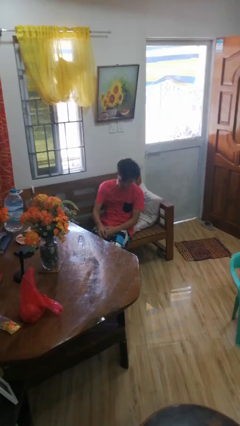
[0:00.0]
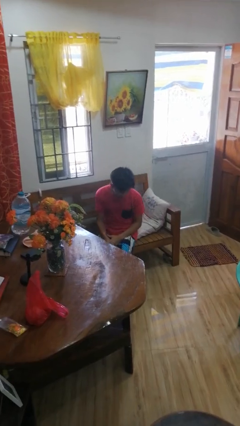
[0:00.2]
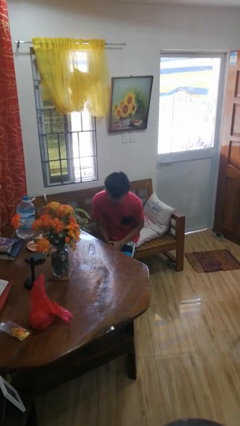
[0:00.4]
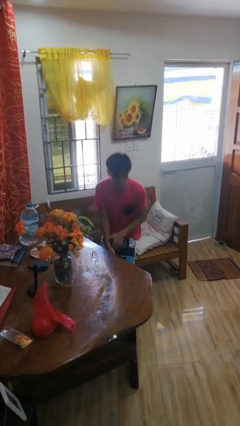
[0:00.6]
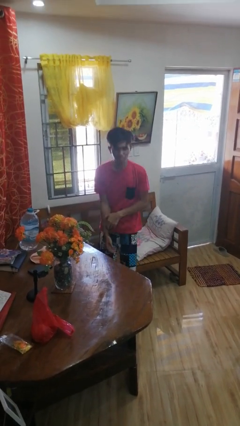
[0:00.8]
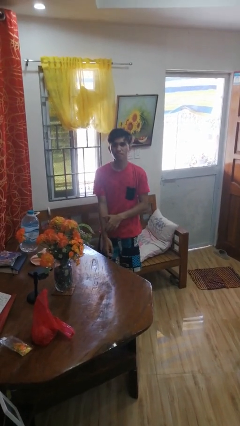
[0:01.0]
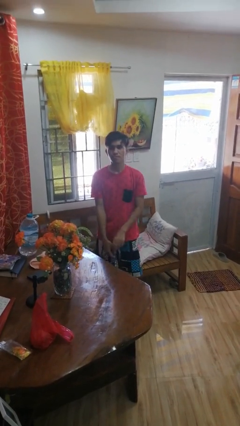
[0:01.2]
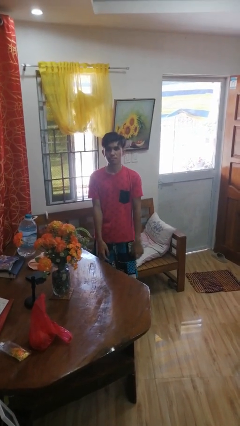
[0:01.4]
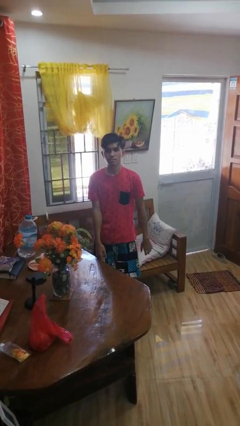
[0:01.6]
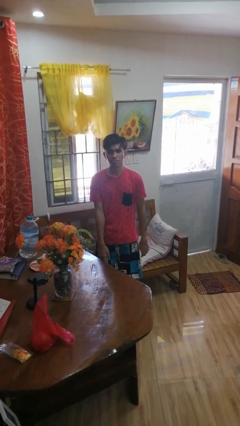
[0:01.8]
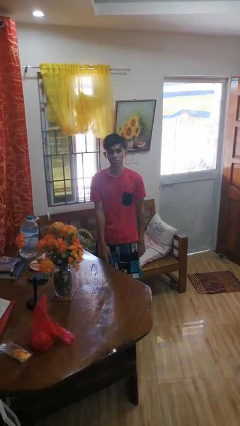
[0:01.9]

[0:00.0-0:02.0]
person stands up

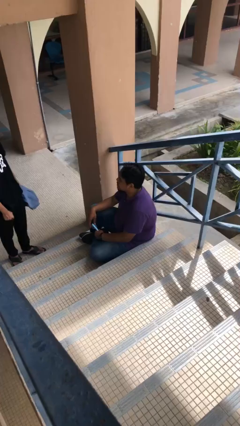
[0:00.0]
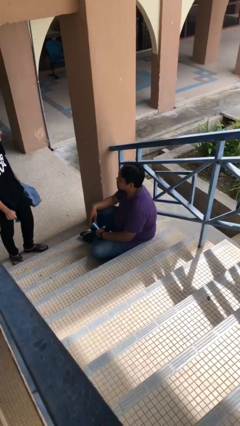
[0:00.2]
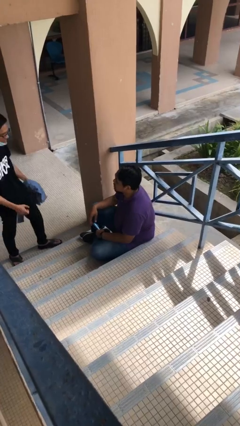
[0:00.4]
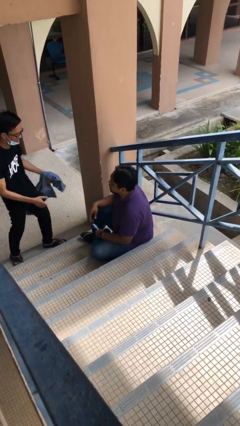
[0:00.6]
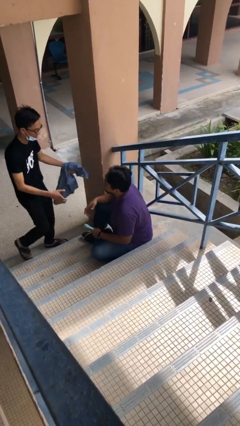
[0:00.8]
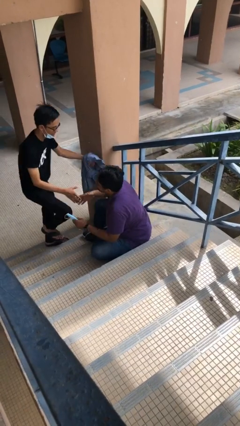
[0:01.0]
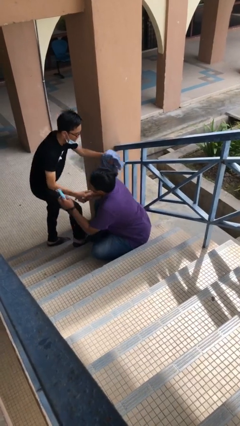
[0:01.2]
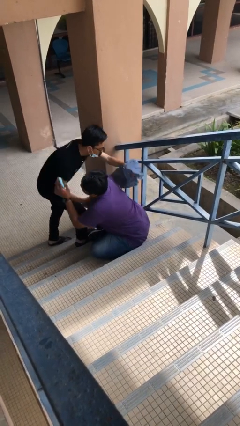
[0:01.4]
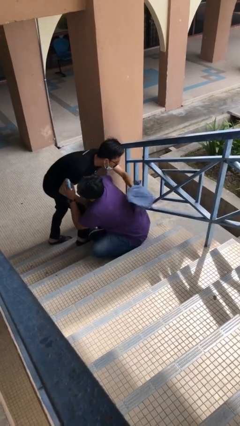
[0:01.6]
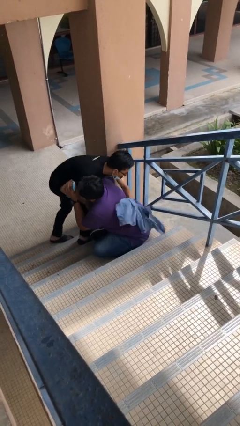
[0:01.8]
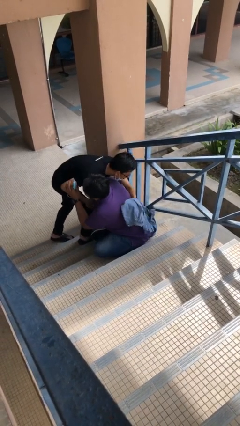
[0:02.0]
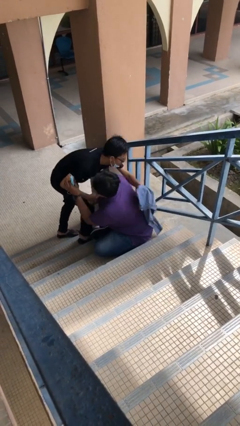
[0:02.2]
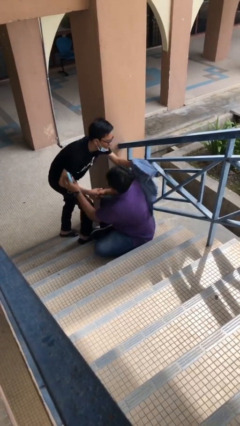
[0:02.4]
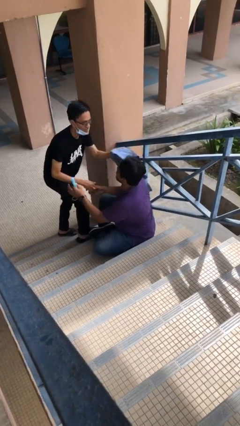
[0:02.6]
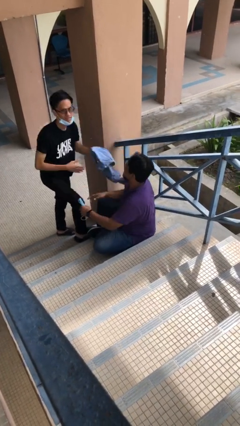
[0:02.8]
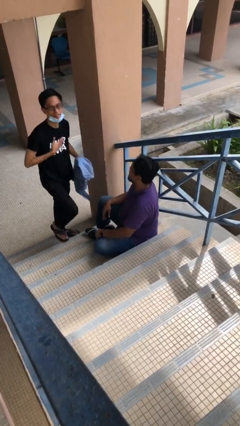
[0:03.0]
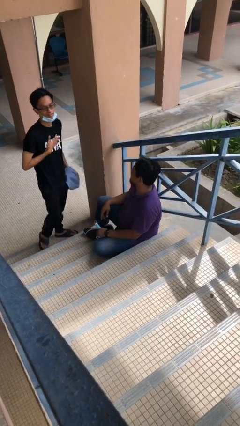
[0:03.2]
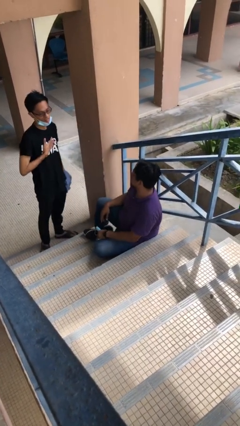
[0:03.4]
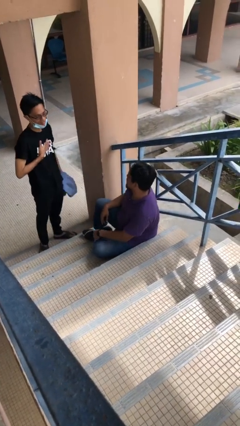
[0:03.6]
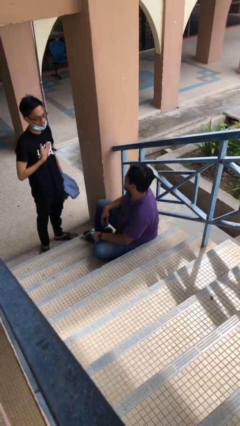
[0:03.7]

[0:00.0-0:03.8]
person embraces person

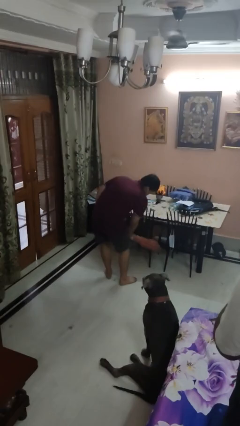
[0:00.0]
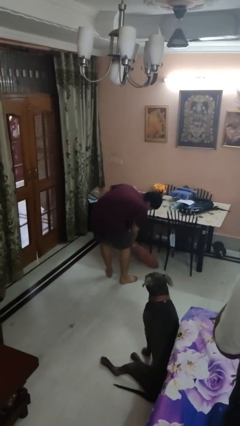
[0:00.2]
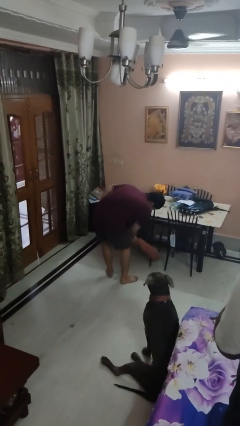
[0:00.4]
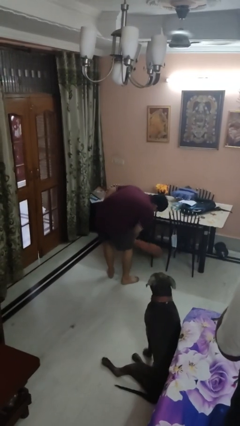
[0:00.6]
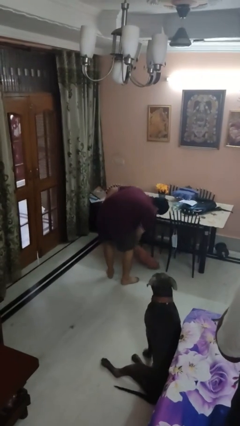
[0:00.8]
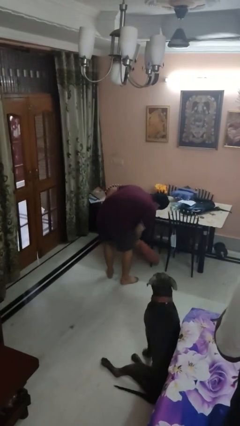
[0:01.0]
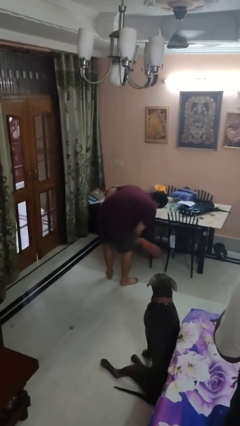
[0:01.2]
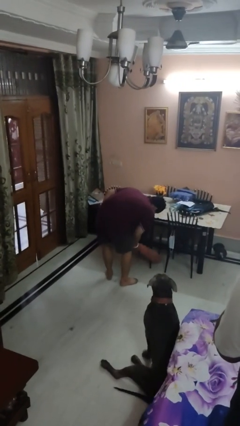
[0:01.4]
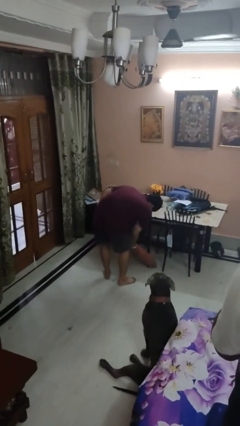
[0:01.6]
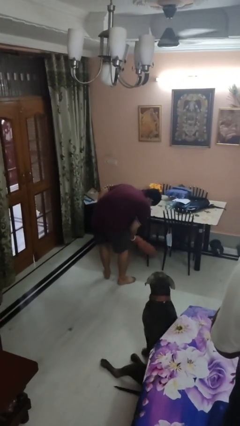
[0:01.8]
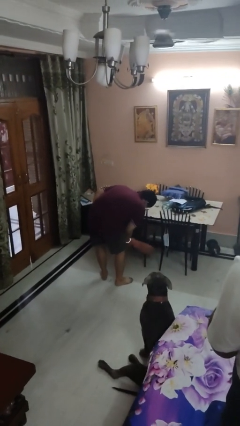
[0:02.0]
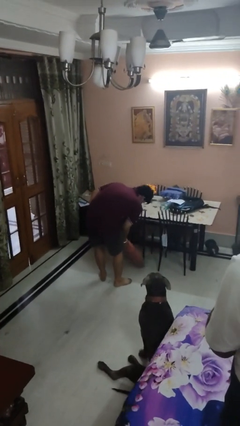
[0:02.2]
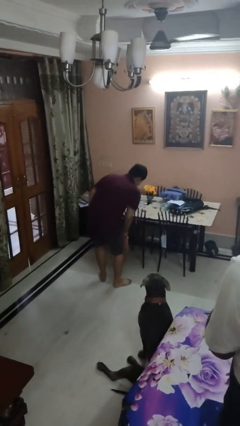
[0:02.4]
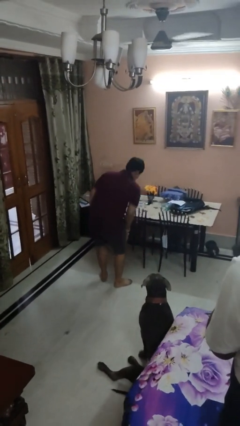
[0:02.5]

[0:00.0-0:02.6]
person dusts furniture

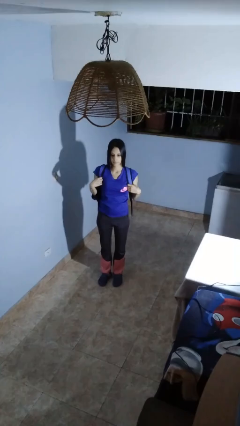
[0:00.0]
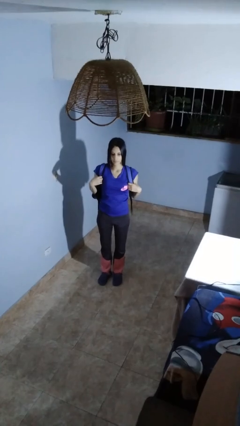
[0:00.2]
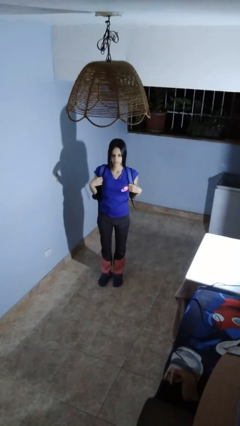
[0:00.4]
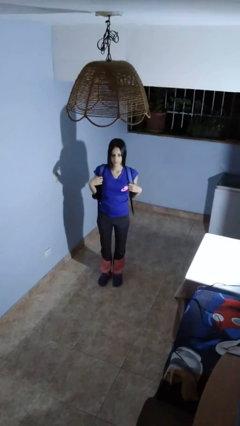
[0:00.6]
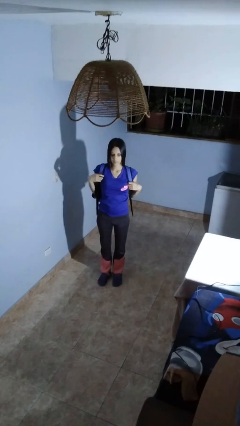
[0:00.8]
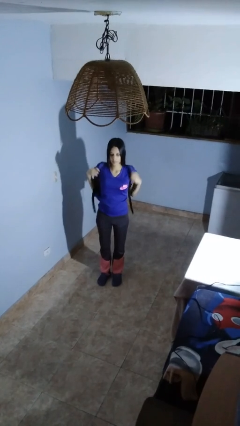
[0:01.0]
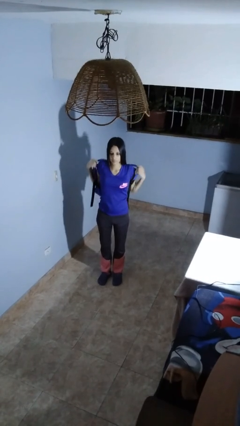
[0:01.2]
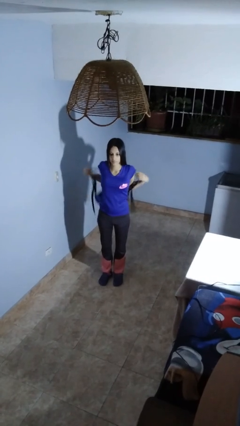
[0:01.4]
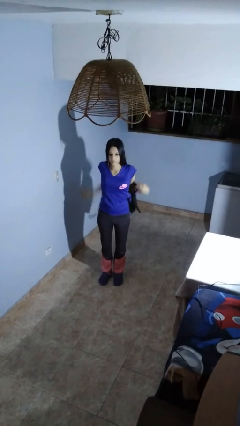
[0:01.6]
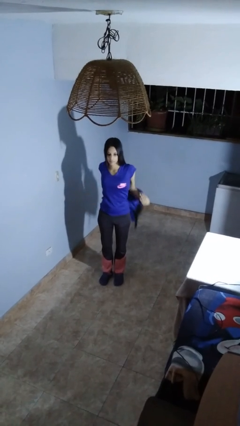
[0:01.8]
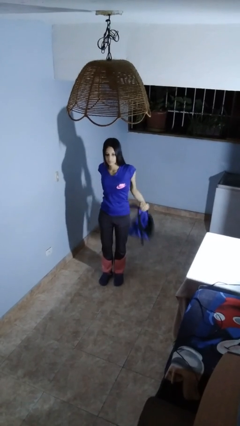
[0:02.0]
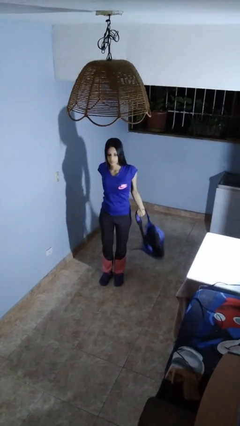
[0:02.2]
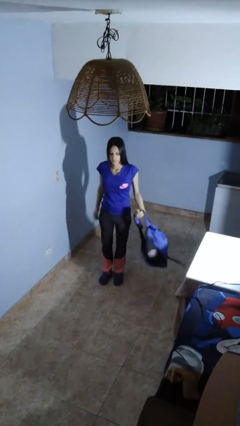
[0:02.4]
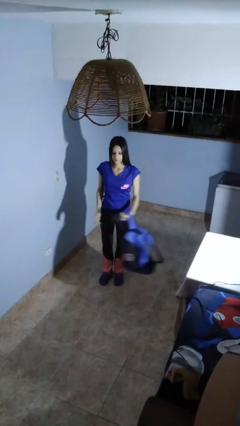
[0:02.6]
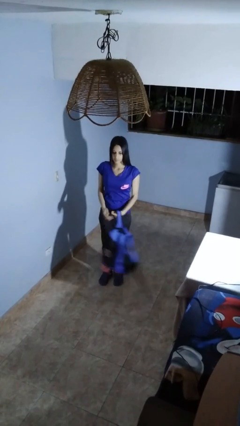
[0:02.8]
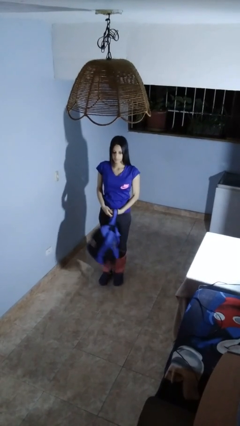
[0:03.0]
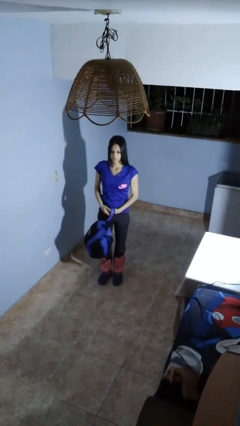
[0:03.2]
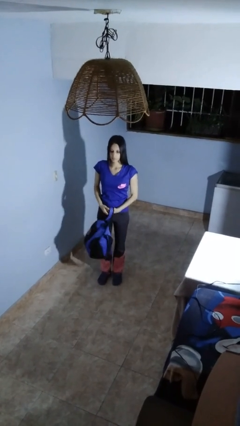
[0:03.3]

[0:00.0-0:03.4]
person takes off backpack

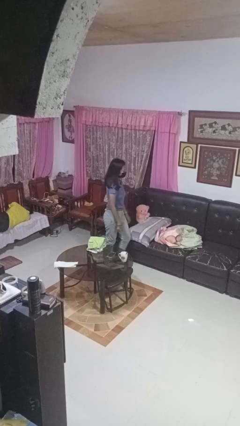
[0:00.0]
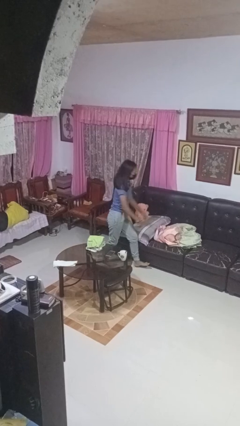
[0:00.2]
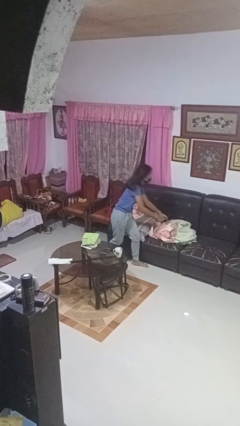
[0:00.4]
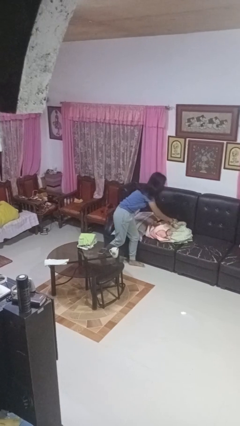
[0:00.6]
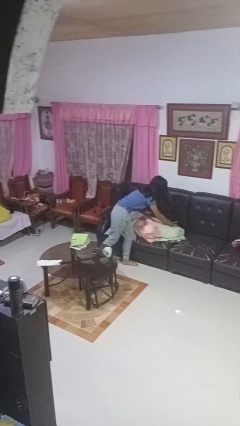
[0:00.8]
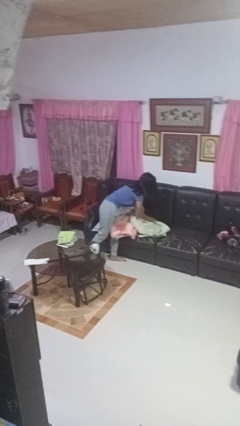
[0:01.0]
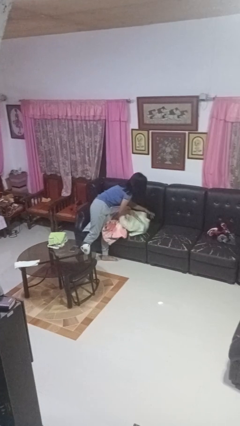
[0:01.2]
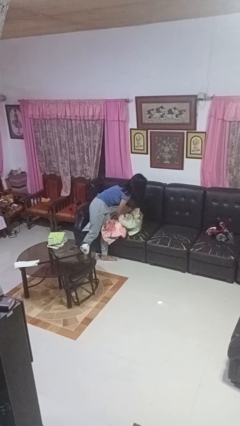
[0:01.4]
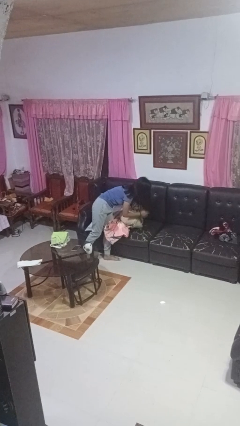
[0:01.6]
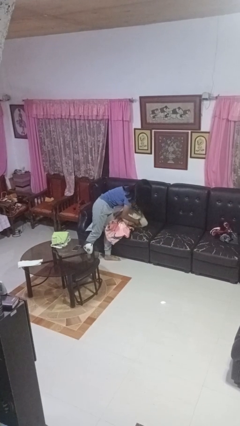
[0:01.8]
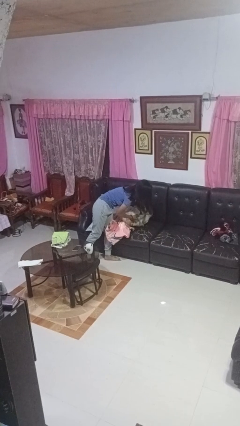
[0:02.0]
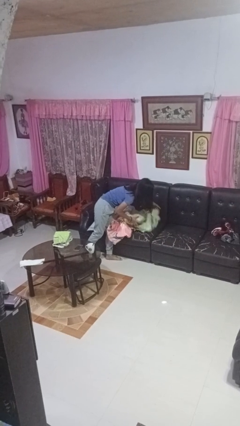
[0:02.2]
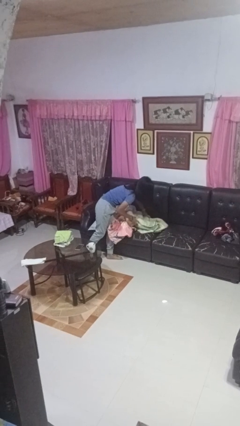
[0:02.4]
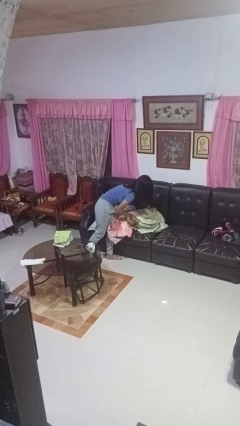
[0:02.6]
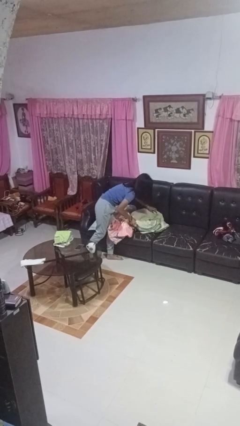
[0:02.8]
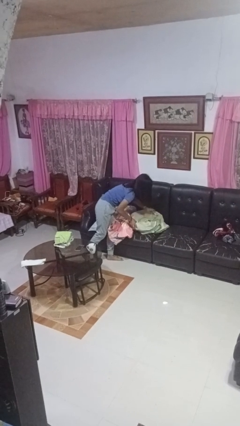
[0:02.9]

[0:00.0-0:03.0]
person searches in couch

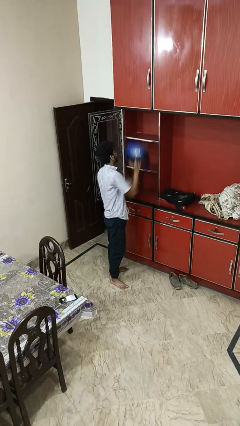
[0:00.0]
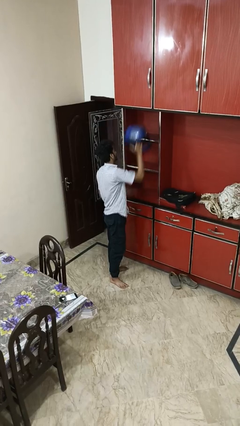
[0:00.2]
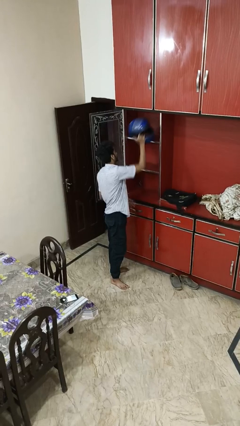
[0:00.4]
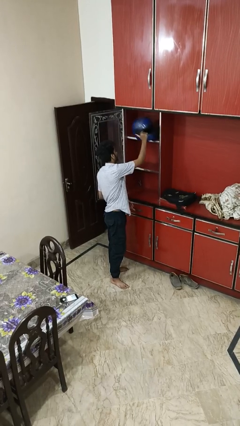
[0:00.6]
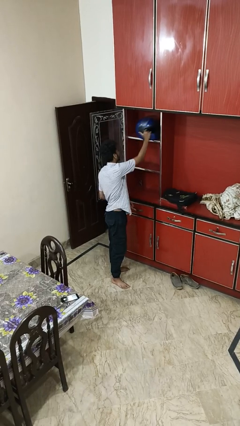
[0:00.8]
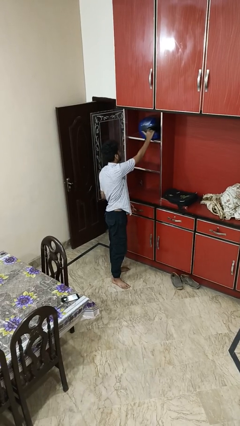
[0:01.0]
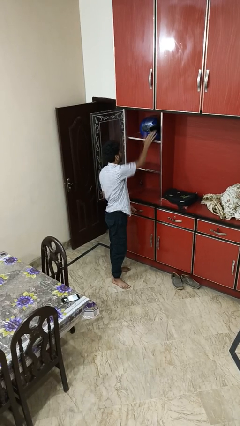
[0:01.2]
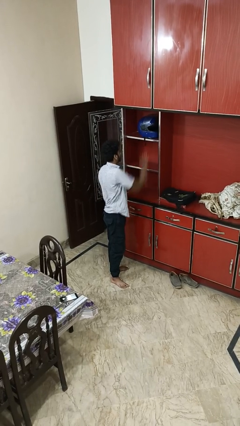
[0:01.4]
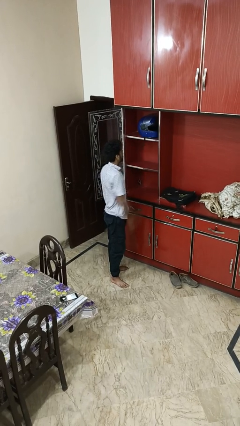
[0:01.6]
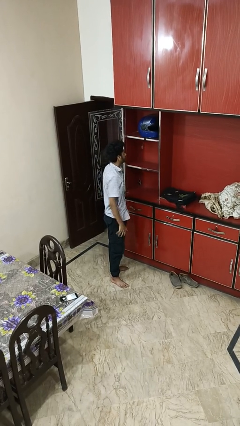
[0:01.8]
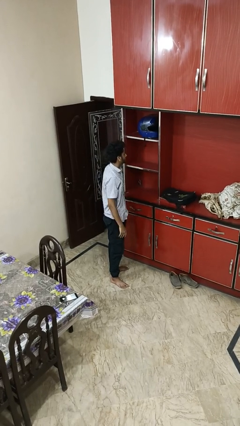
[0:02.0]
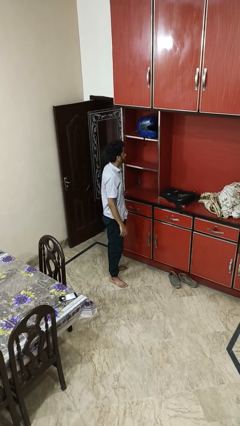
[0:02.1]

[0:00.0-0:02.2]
person puts down object on shelf
